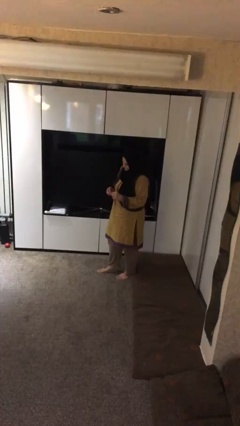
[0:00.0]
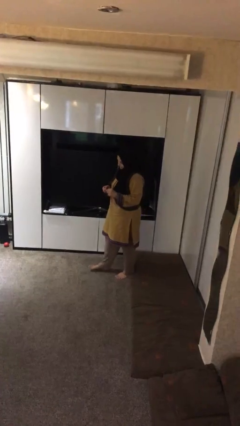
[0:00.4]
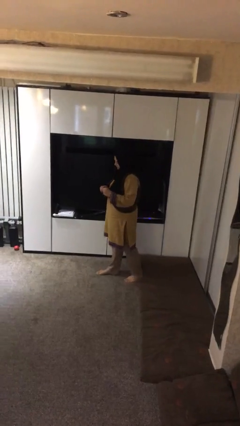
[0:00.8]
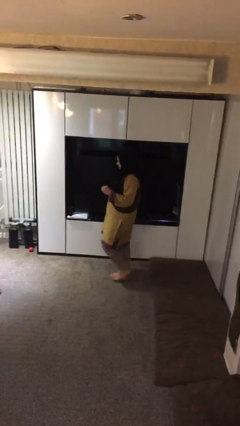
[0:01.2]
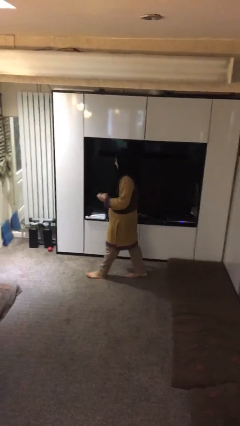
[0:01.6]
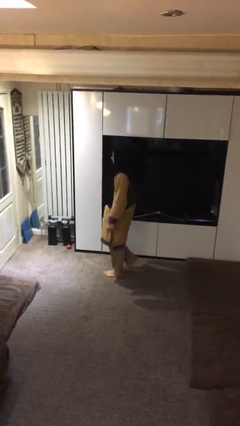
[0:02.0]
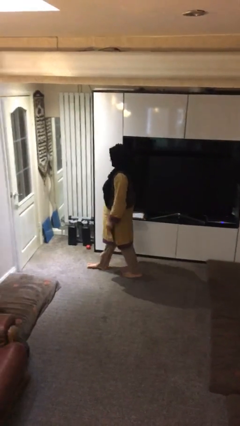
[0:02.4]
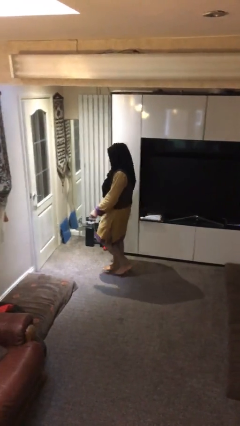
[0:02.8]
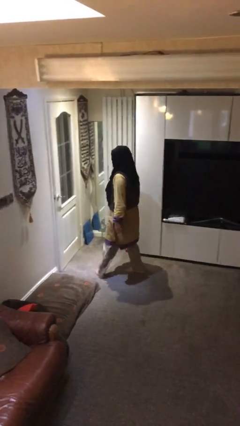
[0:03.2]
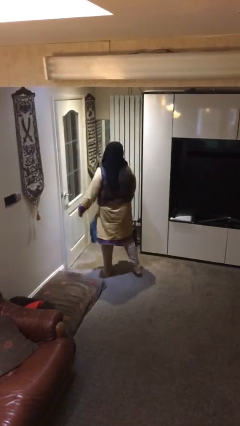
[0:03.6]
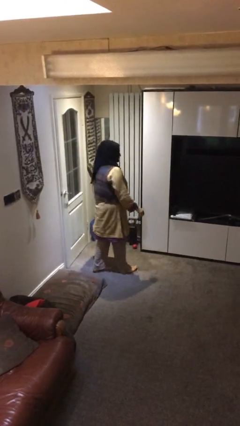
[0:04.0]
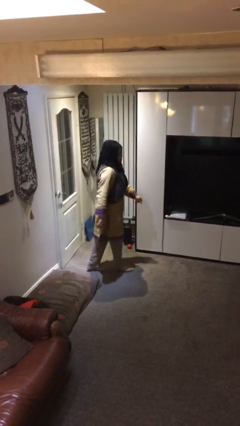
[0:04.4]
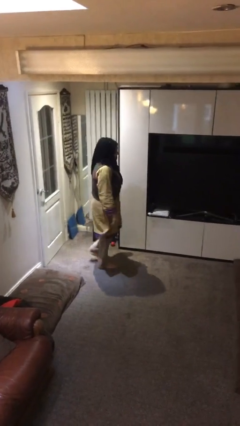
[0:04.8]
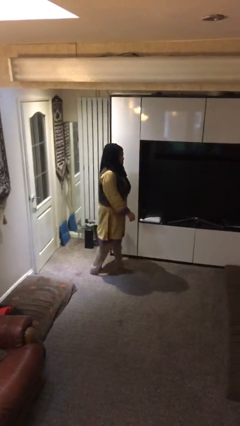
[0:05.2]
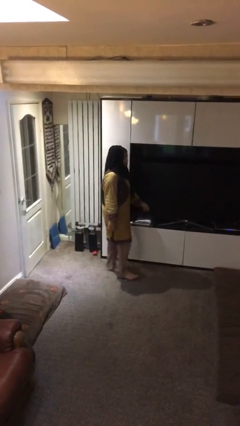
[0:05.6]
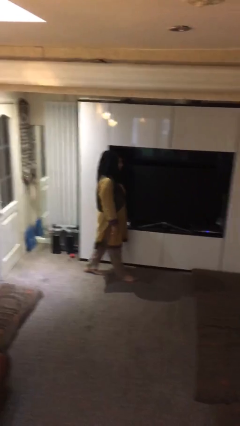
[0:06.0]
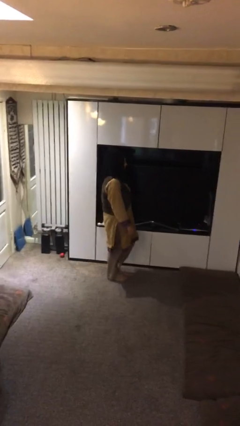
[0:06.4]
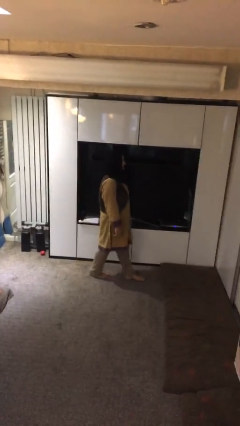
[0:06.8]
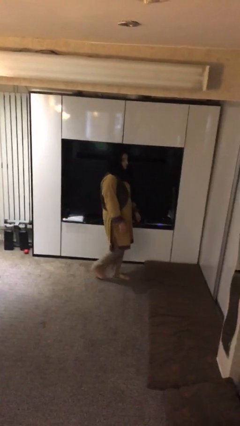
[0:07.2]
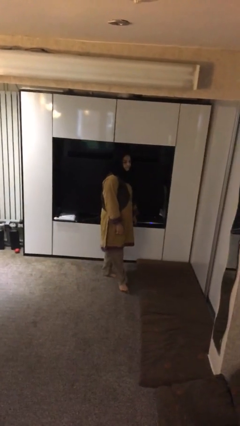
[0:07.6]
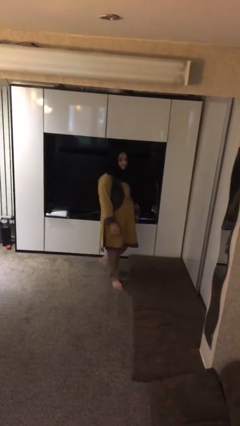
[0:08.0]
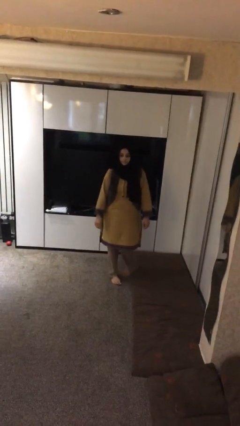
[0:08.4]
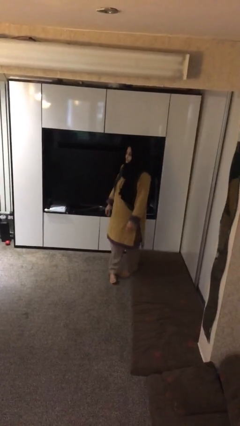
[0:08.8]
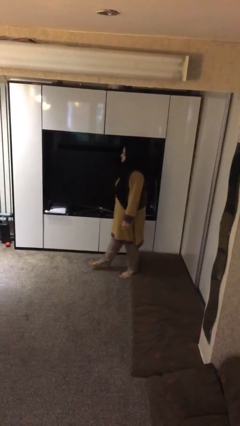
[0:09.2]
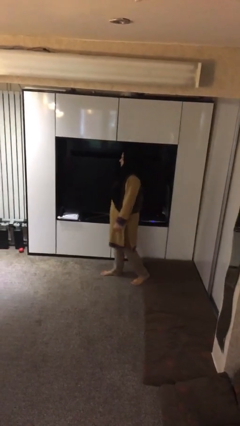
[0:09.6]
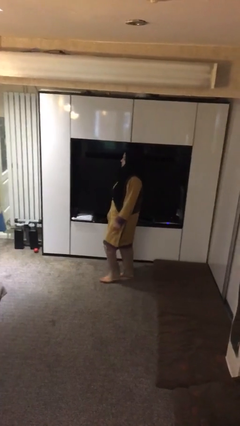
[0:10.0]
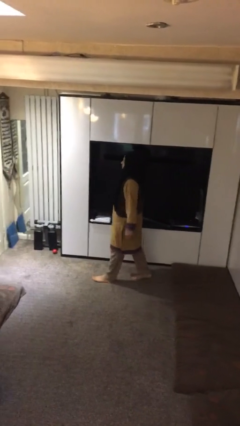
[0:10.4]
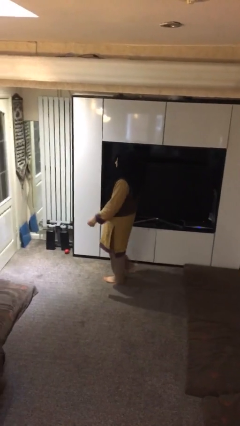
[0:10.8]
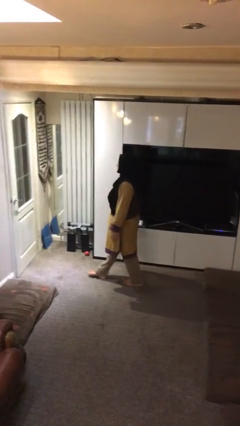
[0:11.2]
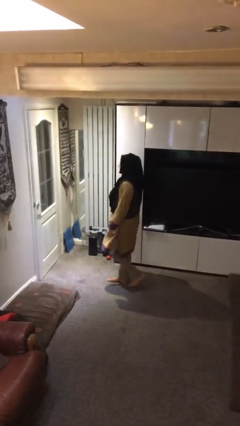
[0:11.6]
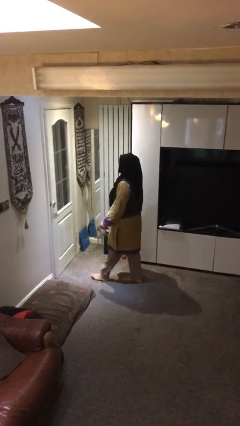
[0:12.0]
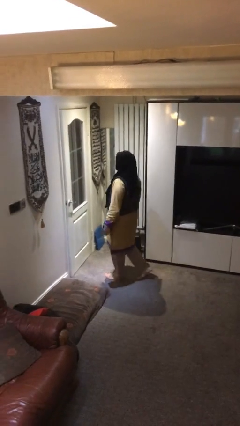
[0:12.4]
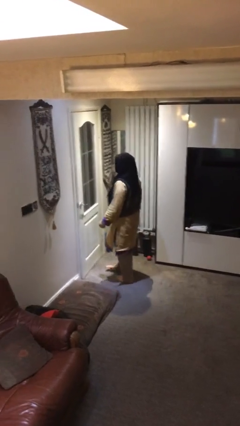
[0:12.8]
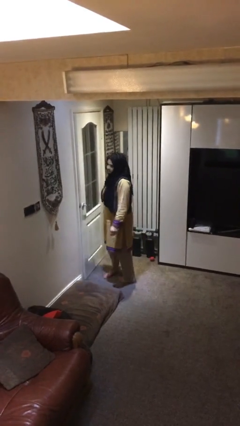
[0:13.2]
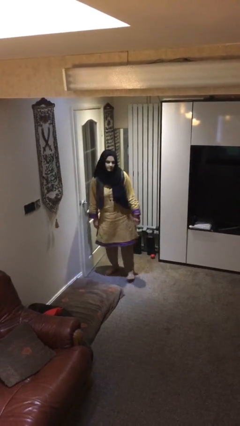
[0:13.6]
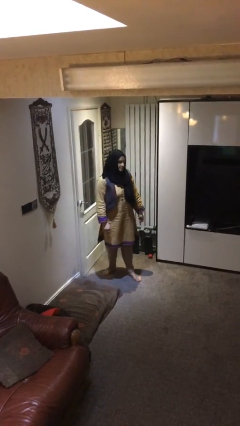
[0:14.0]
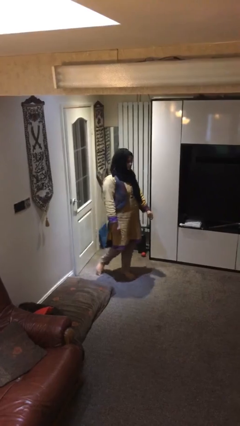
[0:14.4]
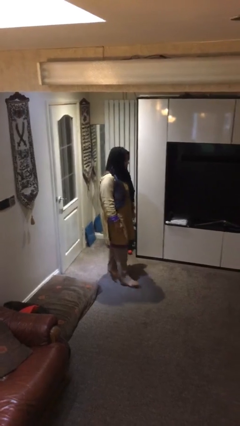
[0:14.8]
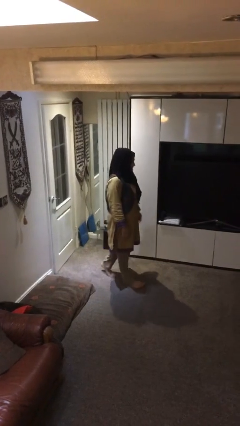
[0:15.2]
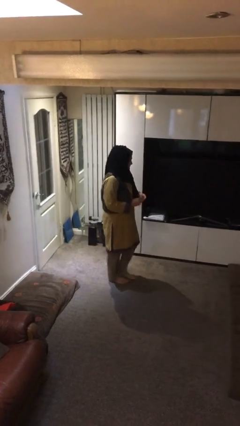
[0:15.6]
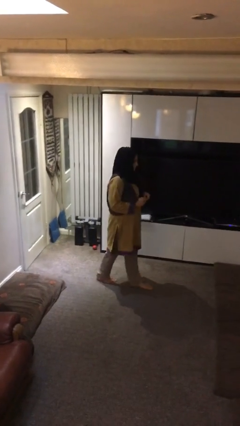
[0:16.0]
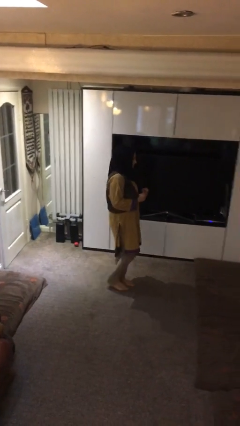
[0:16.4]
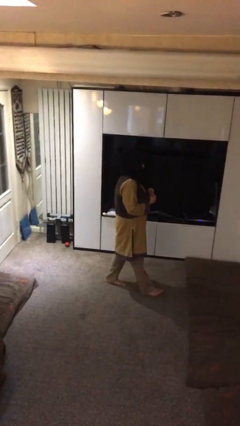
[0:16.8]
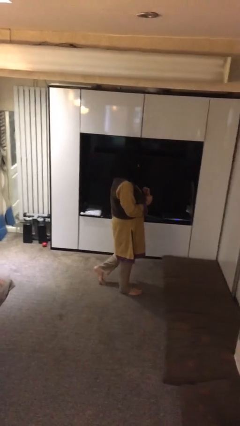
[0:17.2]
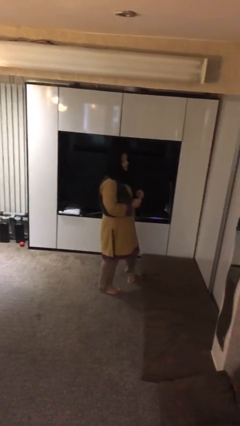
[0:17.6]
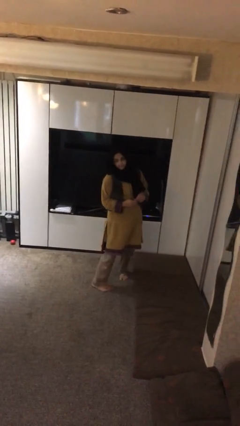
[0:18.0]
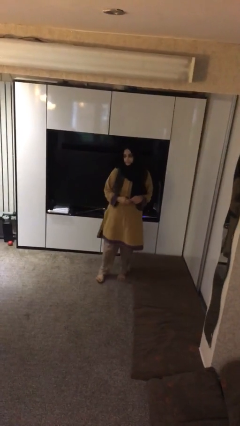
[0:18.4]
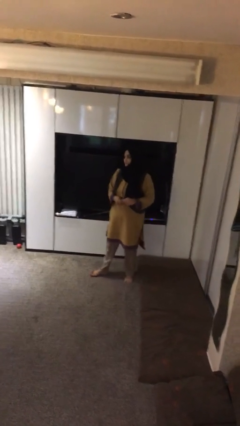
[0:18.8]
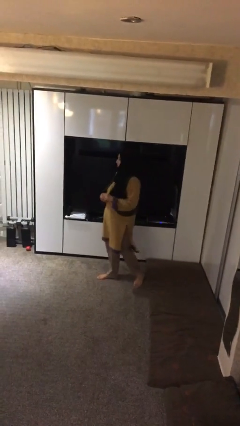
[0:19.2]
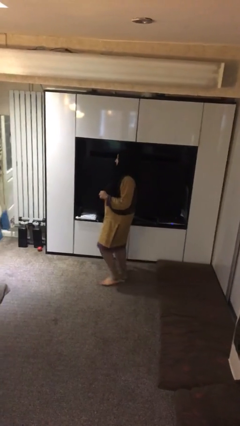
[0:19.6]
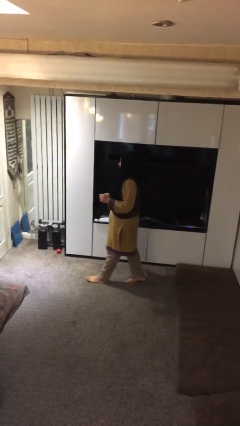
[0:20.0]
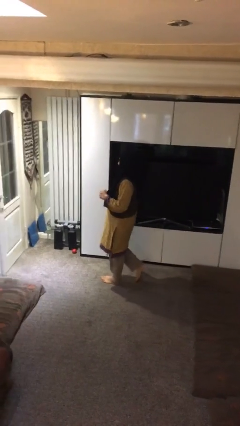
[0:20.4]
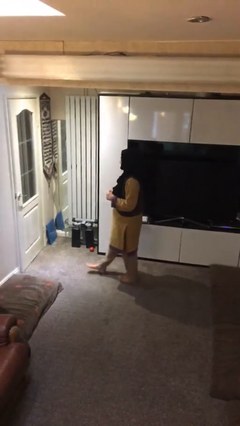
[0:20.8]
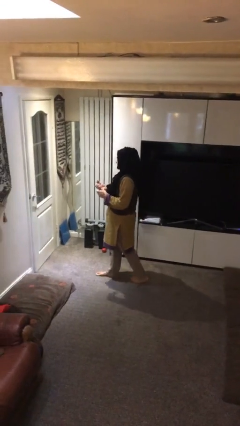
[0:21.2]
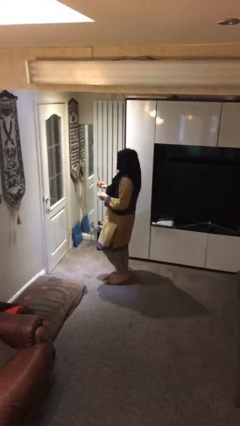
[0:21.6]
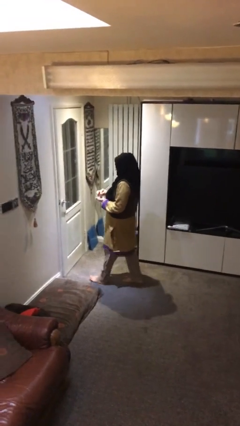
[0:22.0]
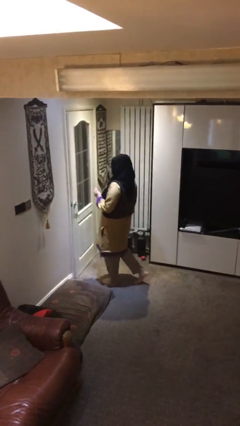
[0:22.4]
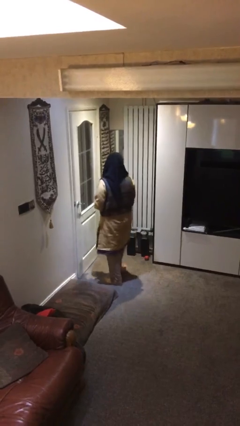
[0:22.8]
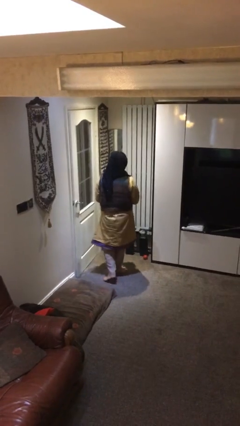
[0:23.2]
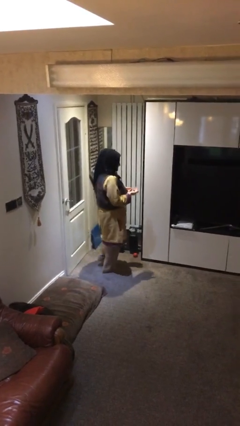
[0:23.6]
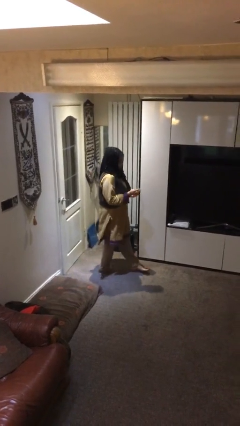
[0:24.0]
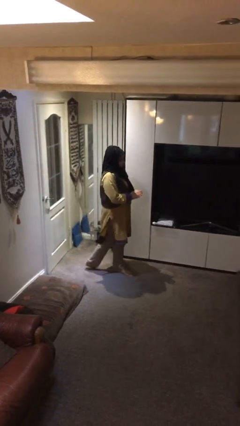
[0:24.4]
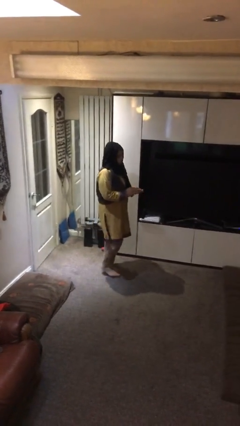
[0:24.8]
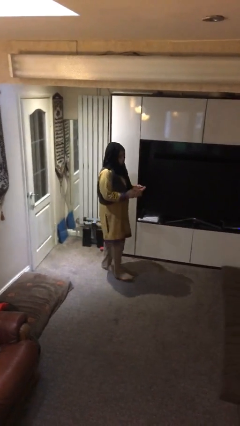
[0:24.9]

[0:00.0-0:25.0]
person walks

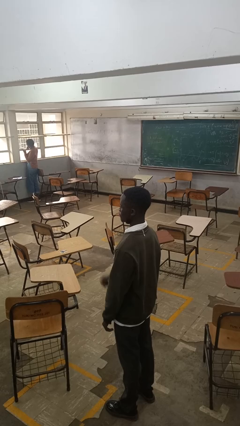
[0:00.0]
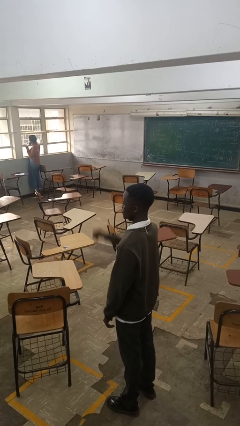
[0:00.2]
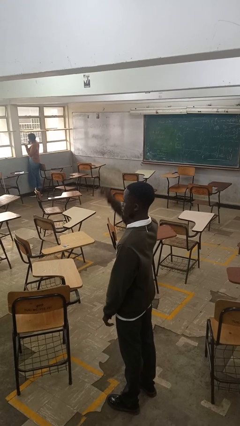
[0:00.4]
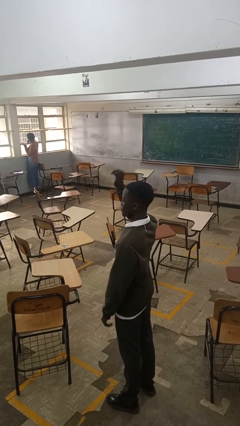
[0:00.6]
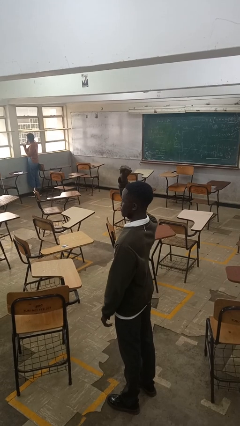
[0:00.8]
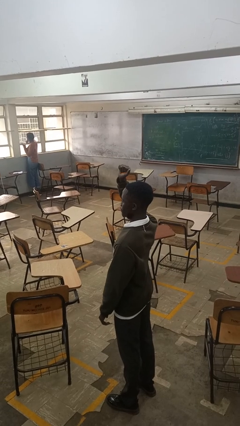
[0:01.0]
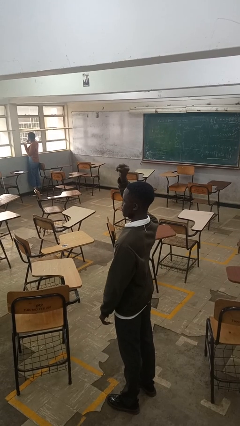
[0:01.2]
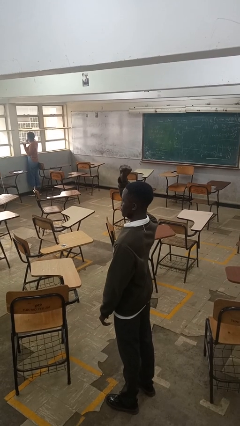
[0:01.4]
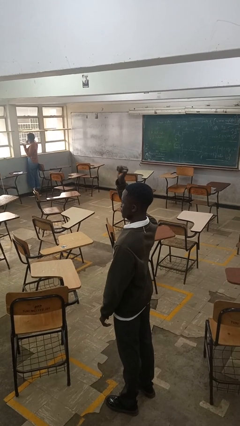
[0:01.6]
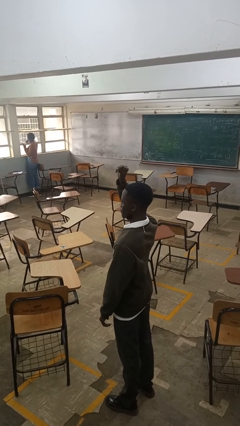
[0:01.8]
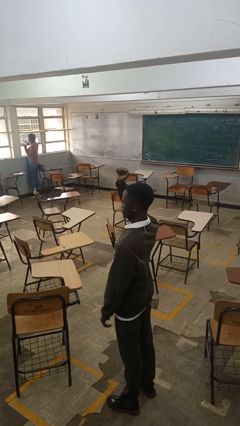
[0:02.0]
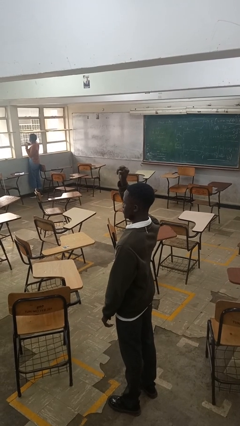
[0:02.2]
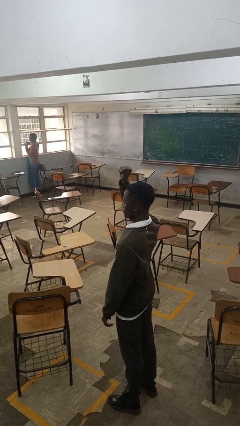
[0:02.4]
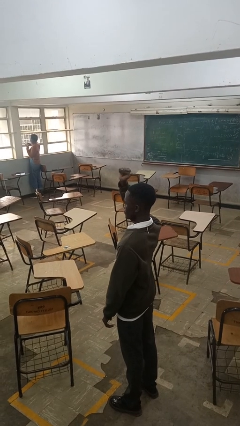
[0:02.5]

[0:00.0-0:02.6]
person snaps fingers

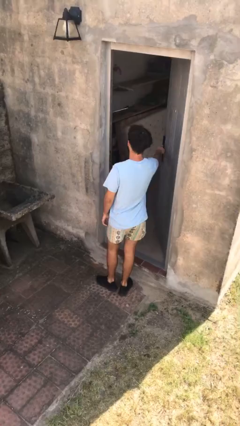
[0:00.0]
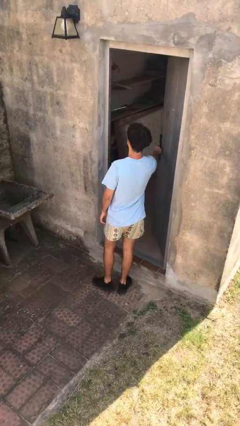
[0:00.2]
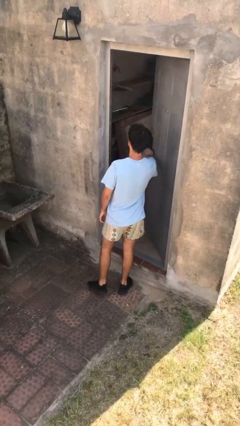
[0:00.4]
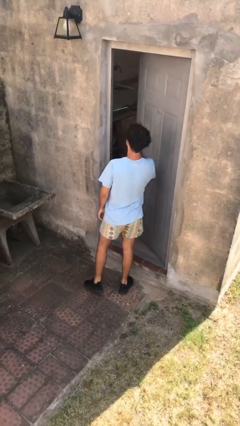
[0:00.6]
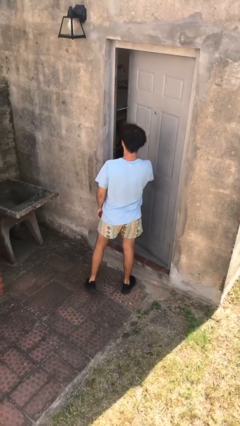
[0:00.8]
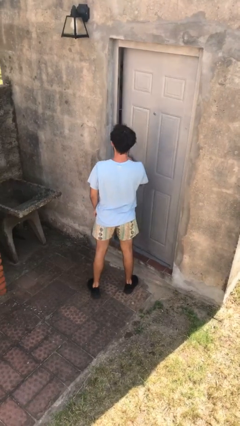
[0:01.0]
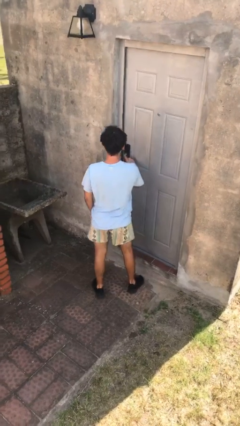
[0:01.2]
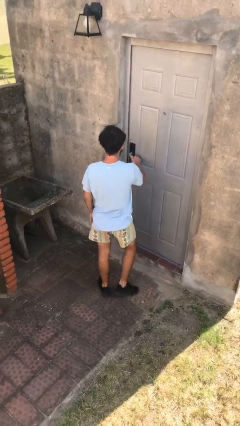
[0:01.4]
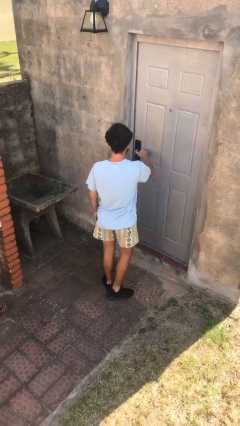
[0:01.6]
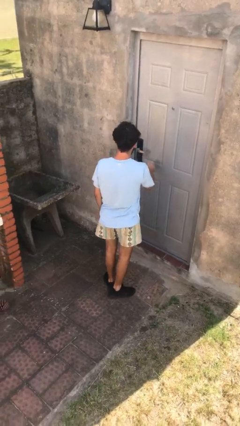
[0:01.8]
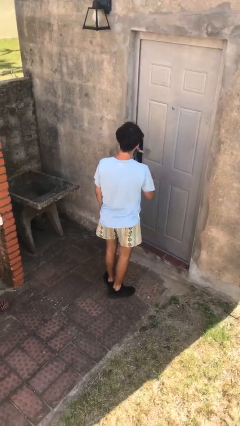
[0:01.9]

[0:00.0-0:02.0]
person closes facility door

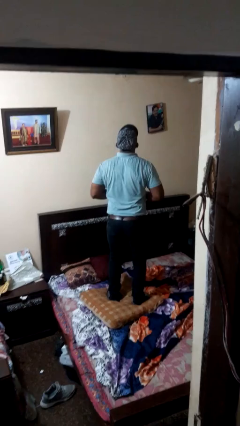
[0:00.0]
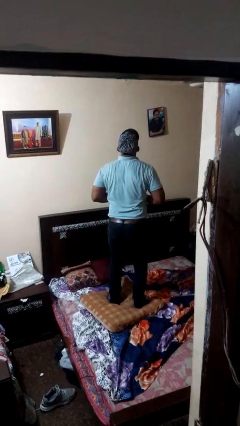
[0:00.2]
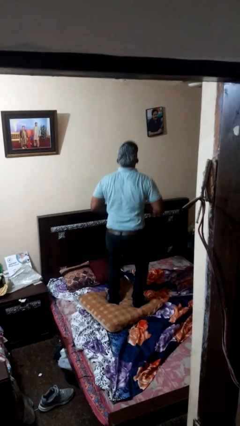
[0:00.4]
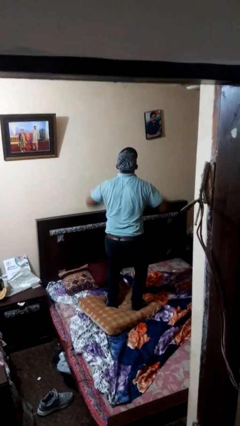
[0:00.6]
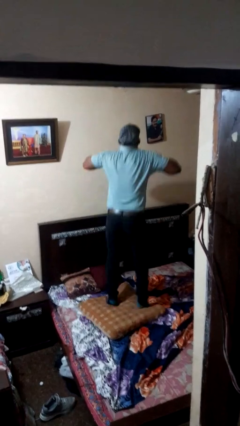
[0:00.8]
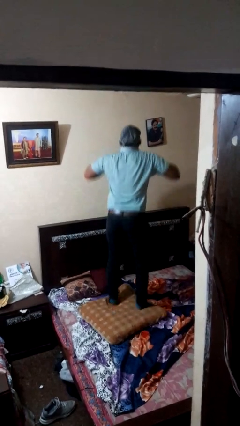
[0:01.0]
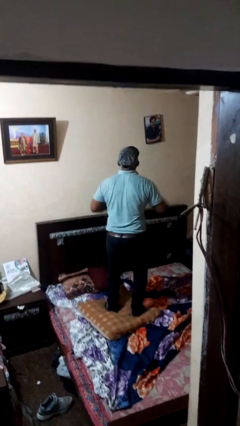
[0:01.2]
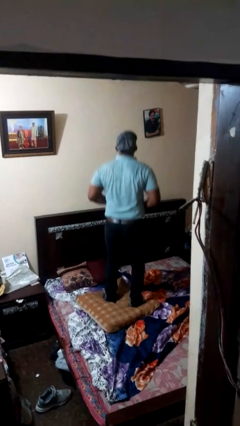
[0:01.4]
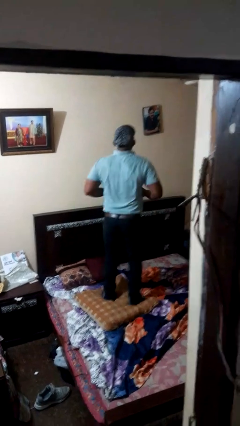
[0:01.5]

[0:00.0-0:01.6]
person jumps on bed
